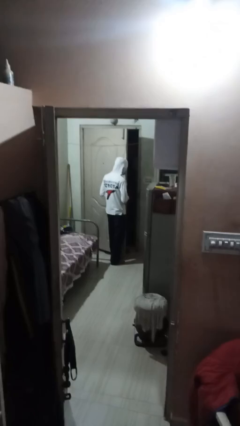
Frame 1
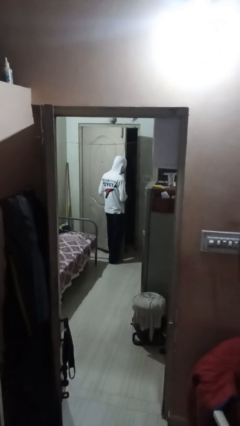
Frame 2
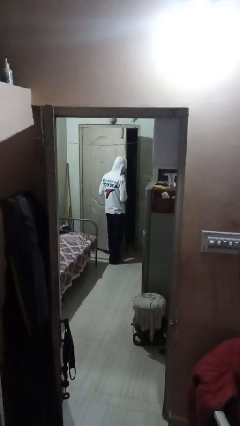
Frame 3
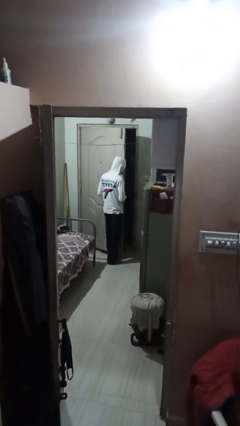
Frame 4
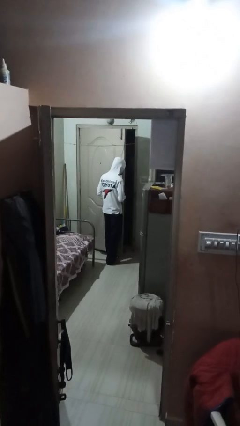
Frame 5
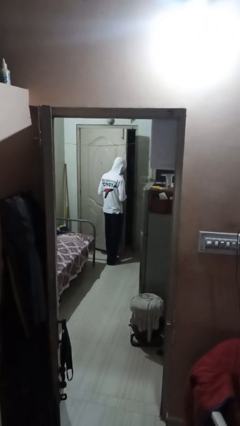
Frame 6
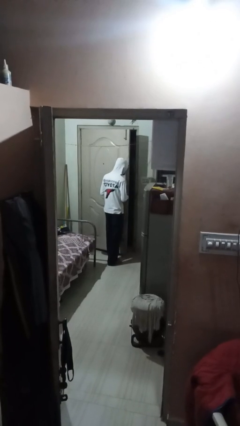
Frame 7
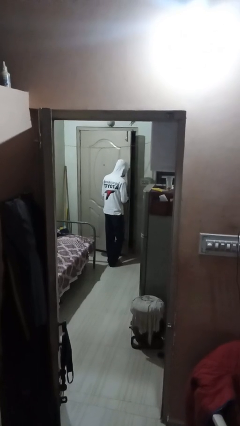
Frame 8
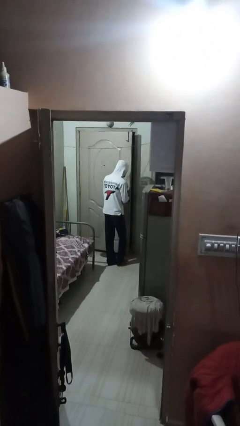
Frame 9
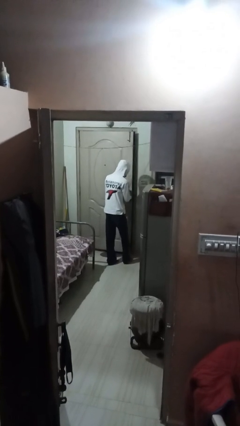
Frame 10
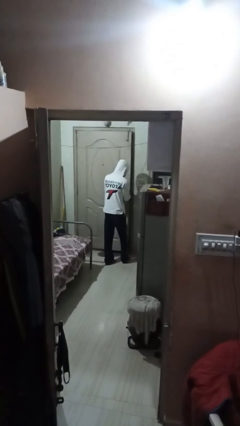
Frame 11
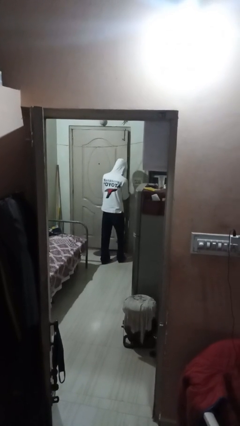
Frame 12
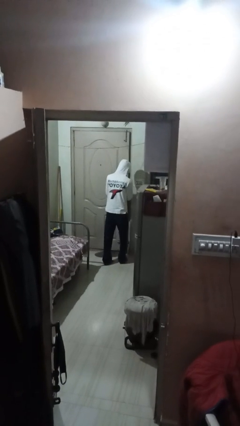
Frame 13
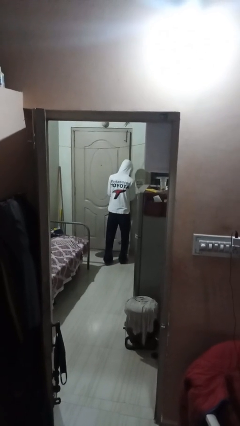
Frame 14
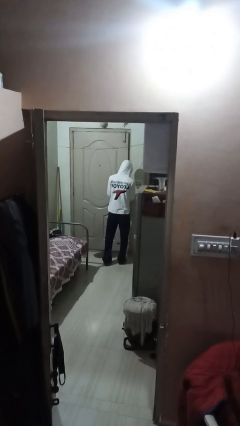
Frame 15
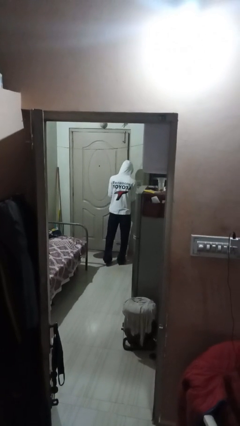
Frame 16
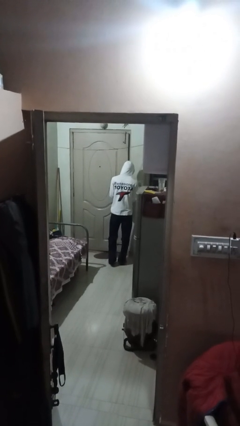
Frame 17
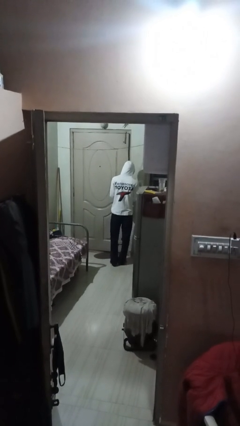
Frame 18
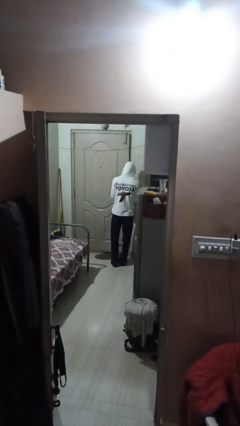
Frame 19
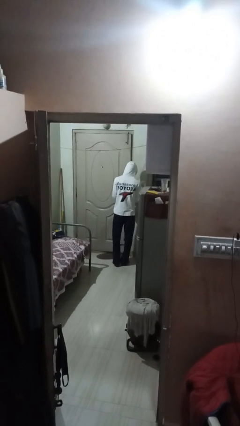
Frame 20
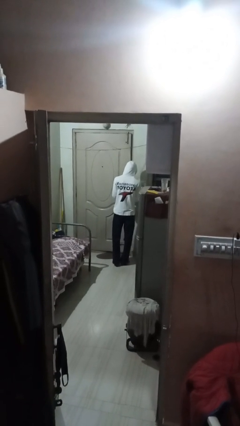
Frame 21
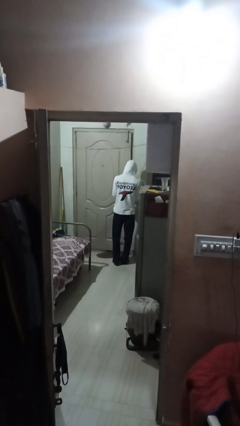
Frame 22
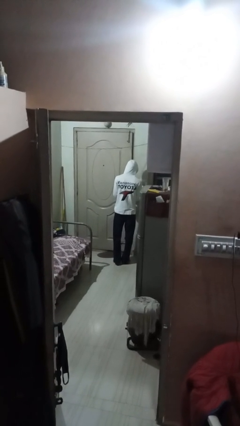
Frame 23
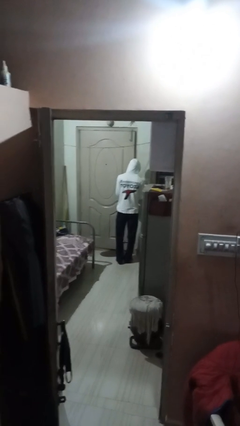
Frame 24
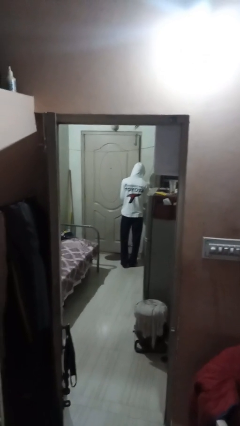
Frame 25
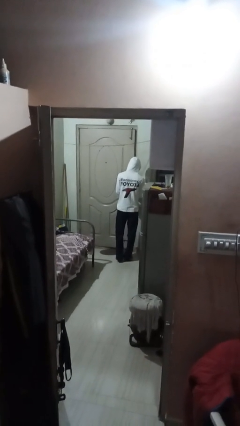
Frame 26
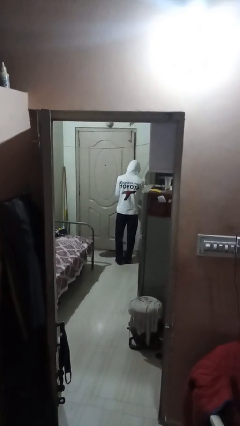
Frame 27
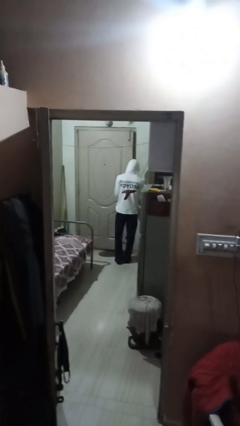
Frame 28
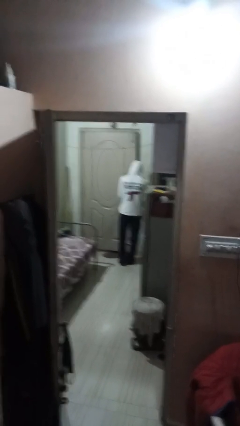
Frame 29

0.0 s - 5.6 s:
person closes facility door

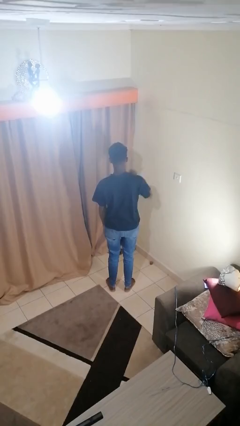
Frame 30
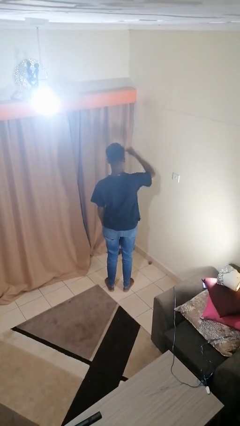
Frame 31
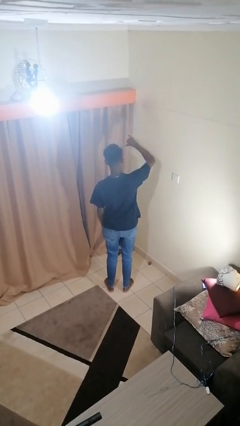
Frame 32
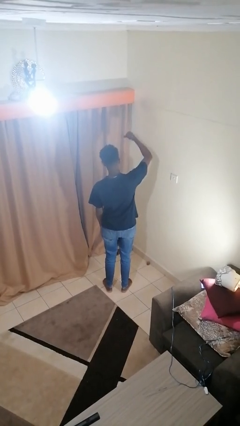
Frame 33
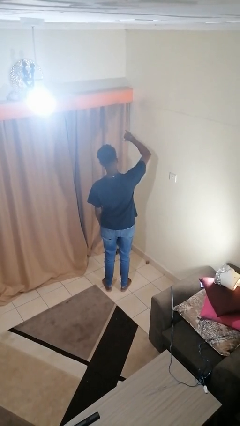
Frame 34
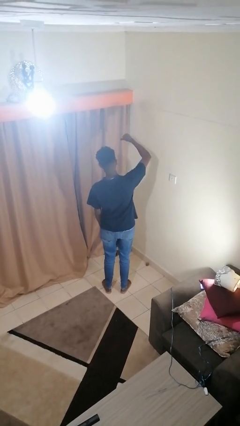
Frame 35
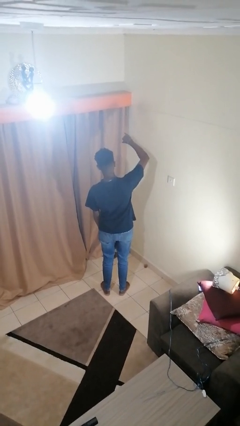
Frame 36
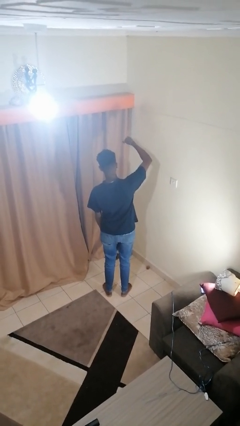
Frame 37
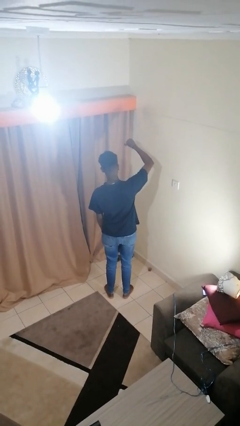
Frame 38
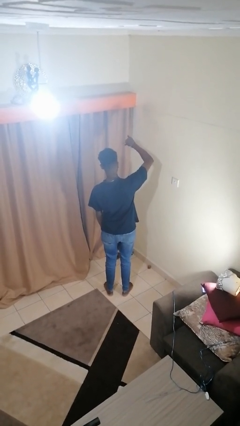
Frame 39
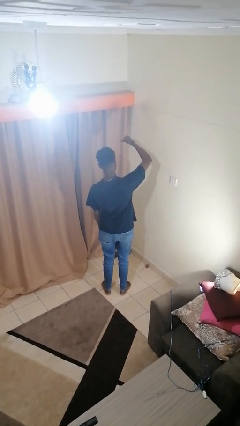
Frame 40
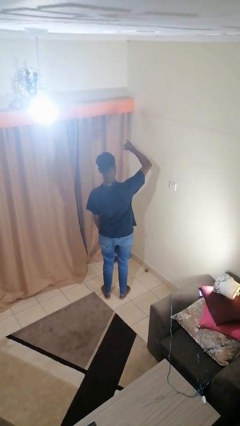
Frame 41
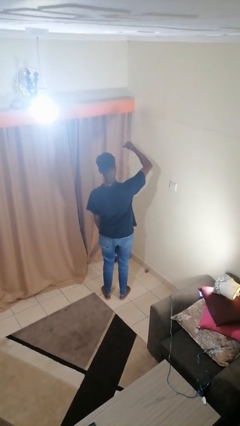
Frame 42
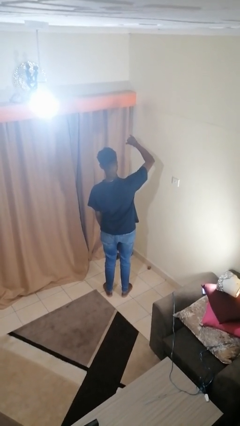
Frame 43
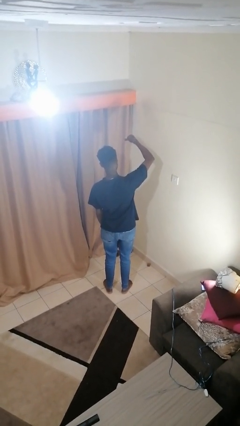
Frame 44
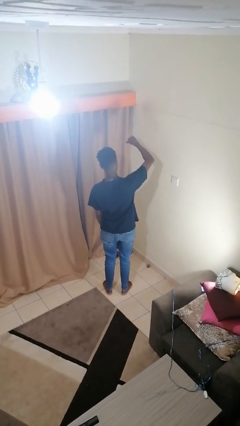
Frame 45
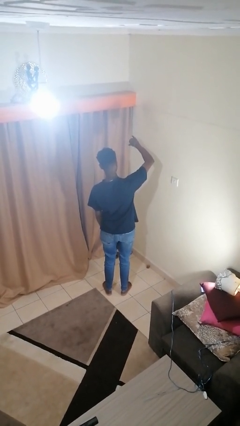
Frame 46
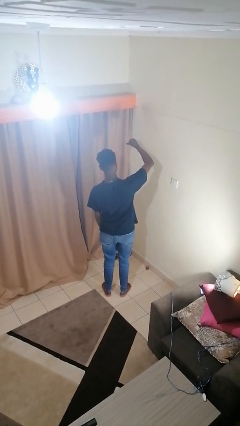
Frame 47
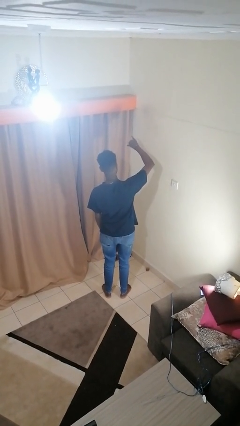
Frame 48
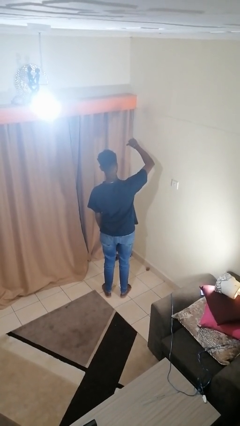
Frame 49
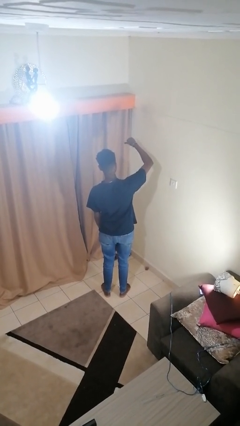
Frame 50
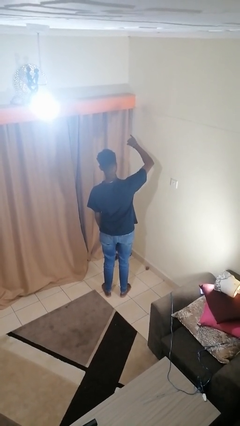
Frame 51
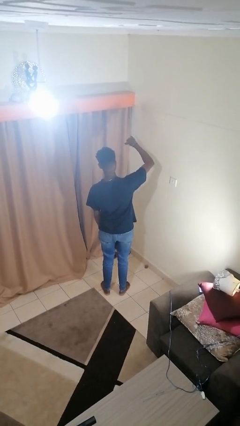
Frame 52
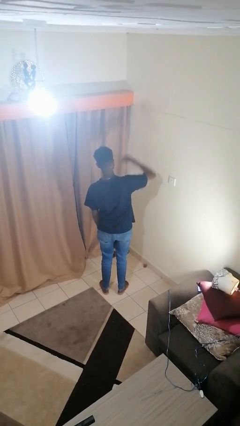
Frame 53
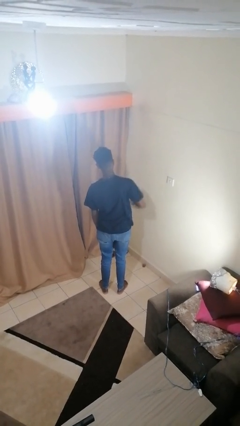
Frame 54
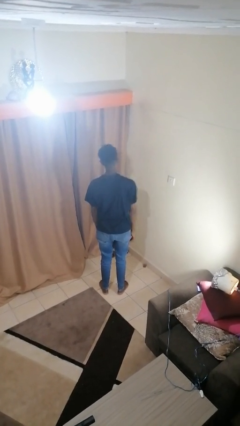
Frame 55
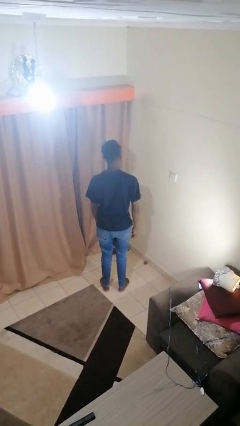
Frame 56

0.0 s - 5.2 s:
person gestures hang loose

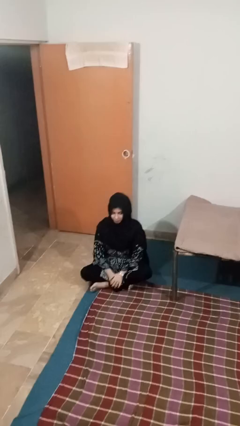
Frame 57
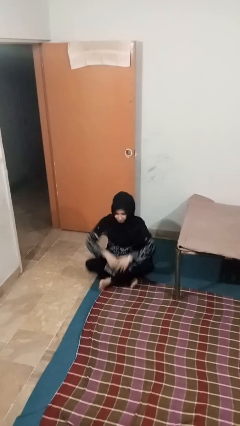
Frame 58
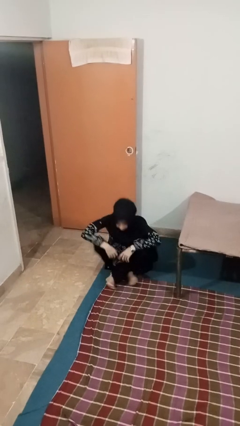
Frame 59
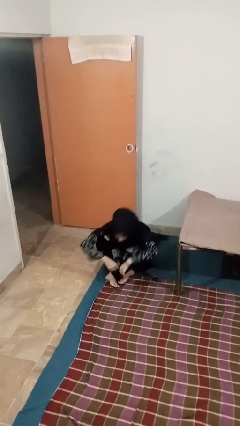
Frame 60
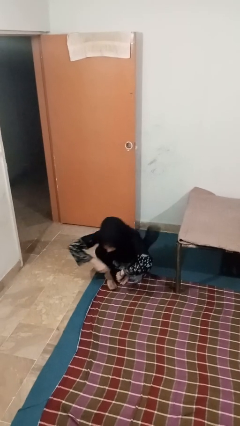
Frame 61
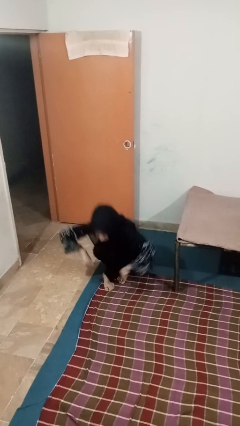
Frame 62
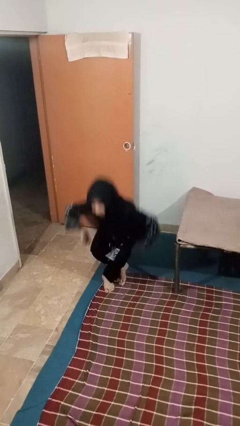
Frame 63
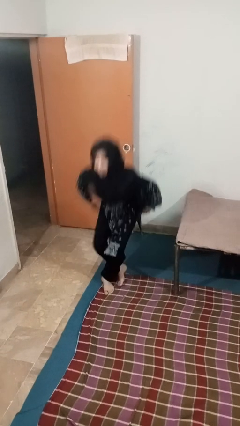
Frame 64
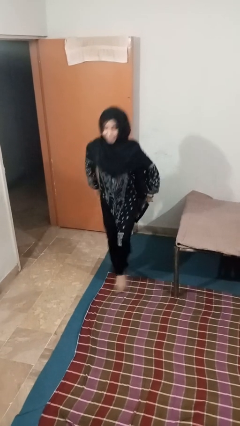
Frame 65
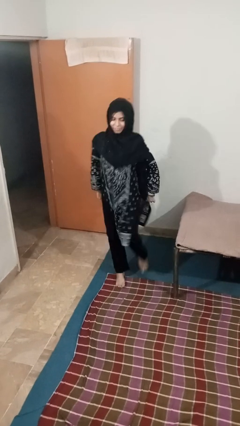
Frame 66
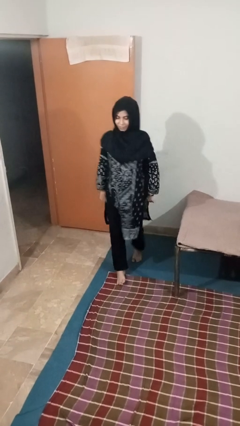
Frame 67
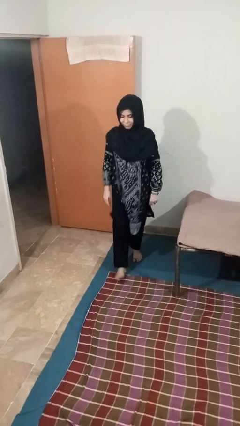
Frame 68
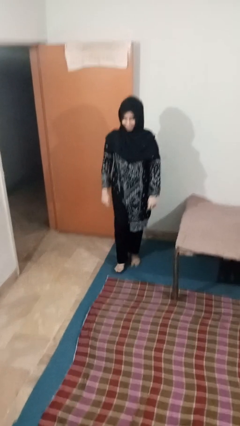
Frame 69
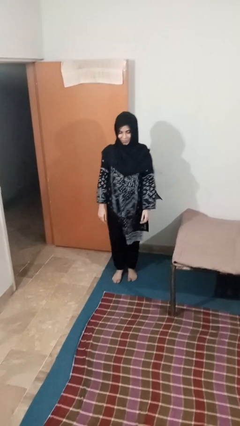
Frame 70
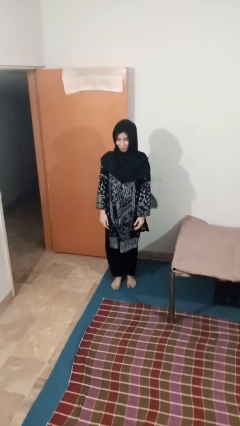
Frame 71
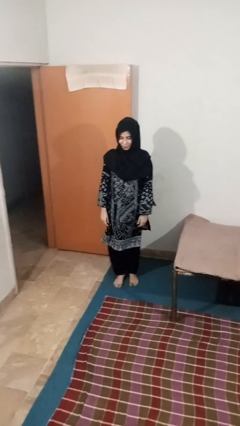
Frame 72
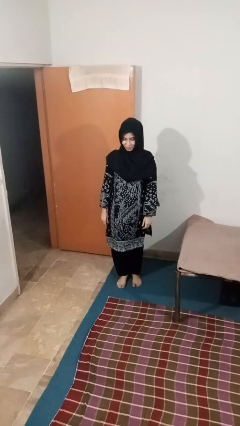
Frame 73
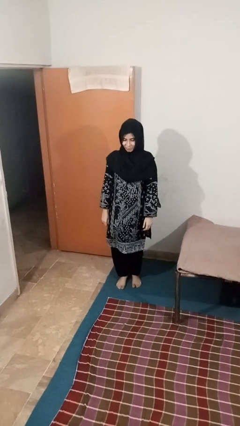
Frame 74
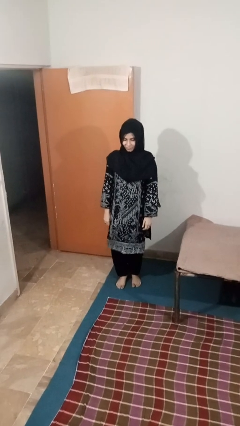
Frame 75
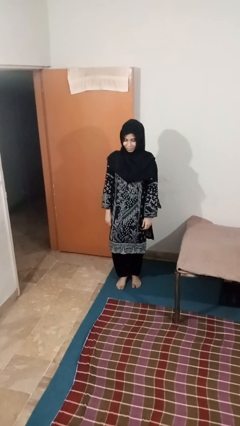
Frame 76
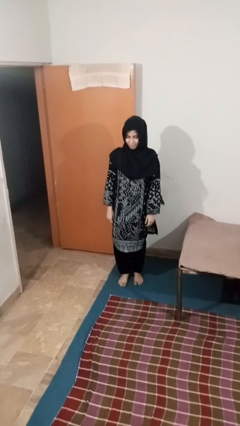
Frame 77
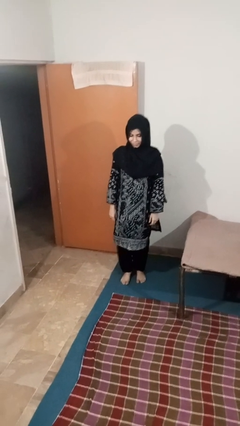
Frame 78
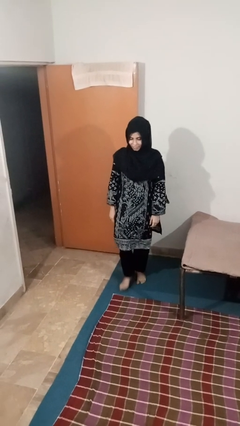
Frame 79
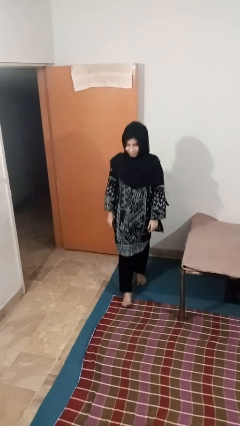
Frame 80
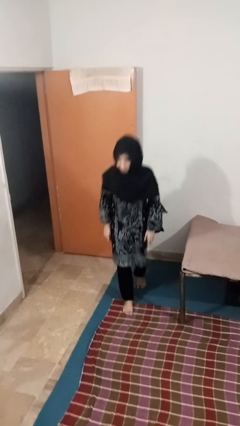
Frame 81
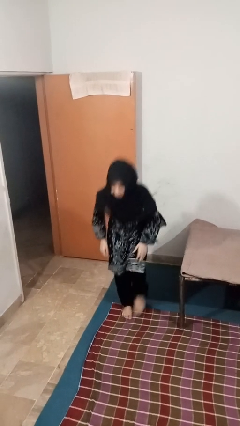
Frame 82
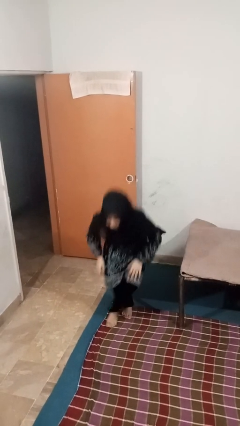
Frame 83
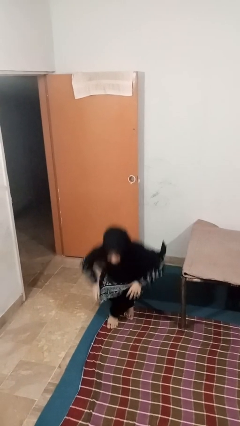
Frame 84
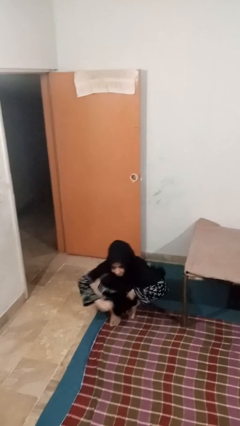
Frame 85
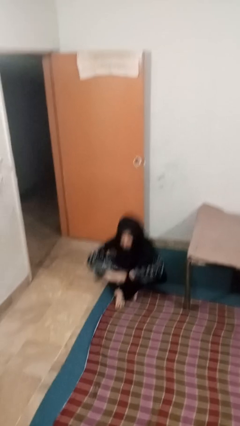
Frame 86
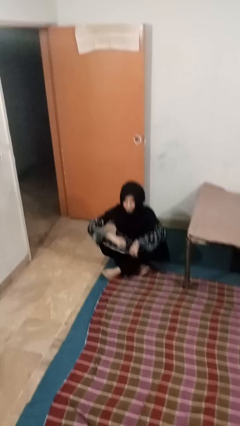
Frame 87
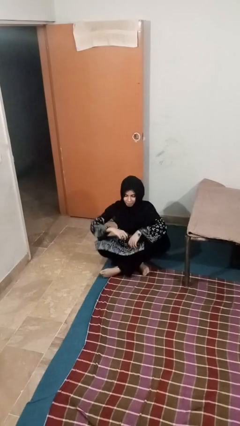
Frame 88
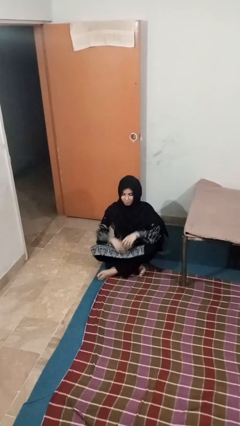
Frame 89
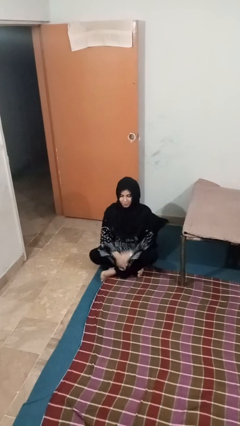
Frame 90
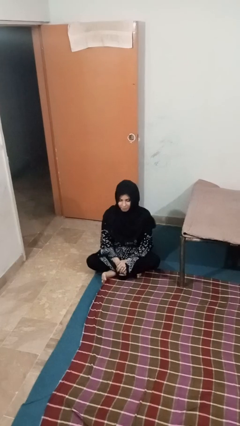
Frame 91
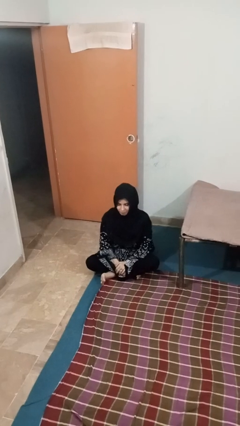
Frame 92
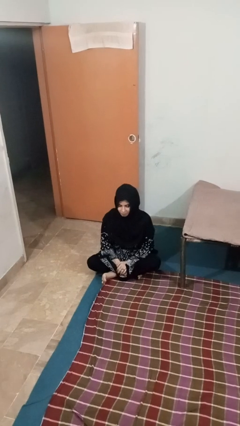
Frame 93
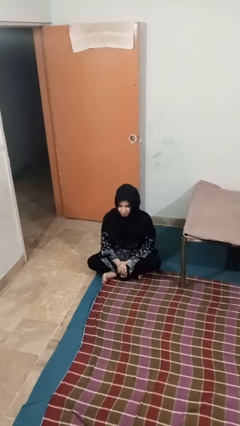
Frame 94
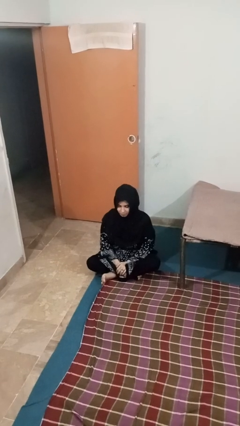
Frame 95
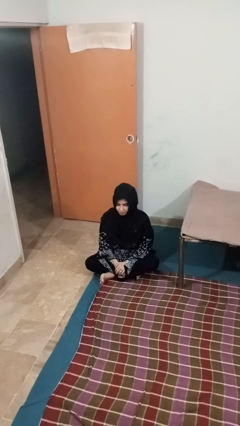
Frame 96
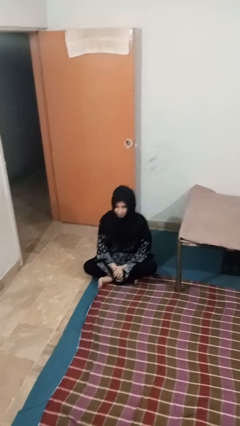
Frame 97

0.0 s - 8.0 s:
person stands up from floor
